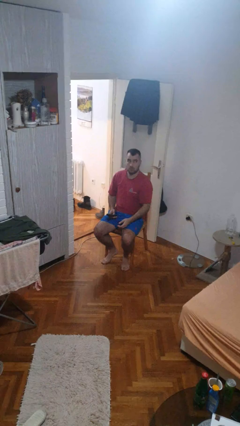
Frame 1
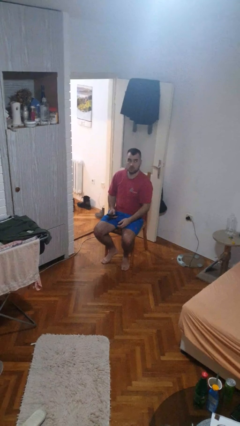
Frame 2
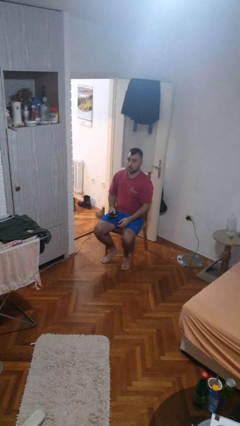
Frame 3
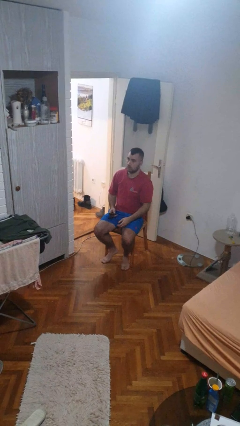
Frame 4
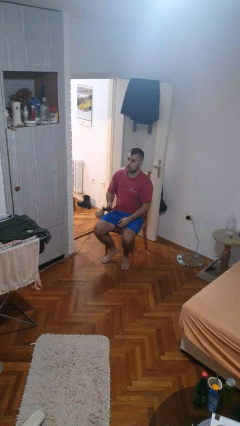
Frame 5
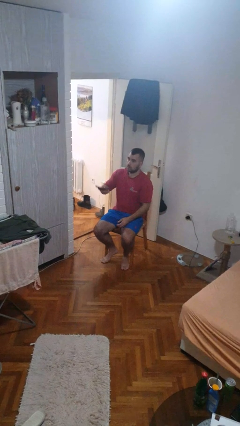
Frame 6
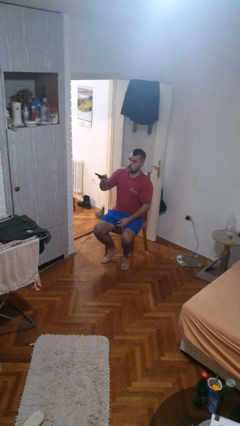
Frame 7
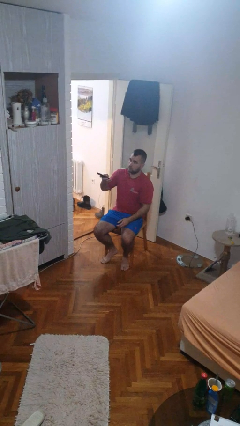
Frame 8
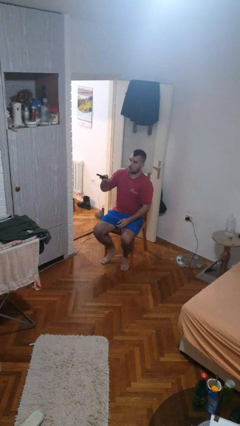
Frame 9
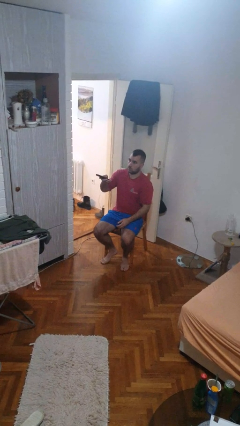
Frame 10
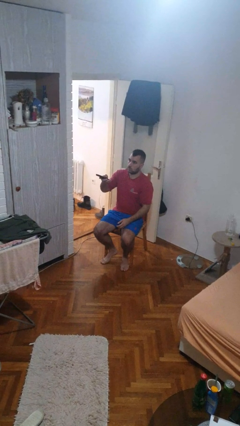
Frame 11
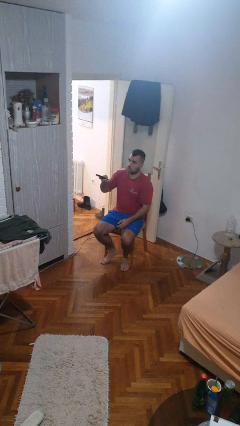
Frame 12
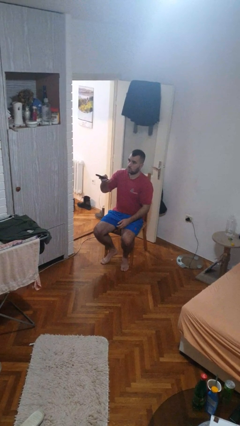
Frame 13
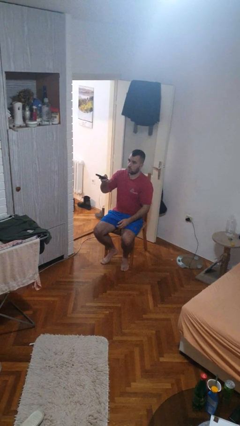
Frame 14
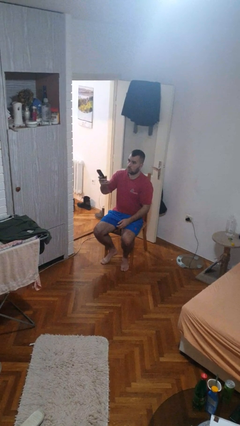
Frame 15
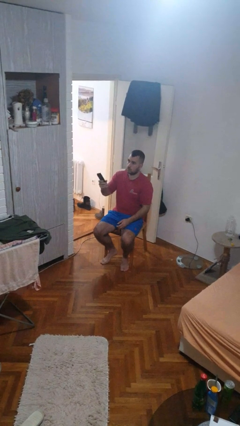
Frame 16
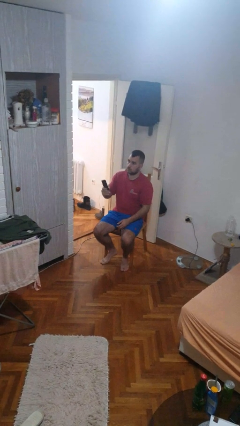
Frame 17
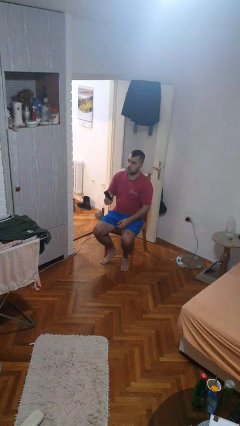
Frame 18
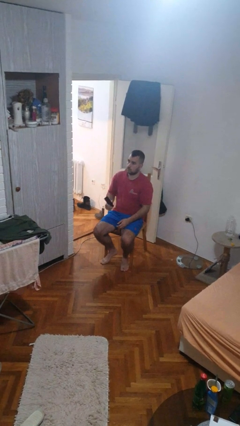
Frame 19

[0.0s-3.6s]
person uses television remote

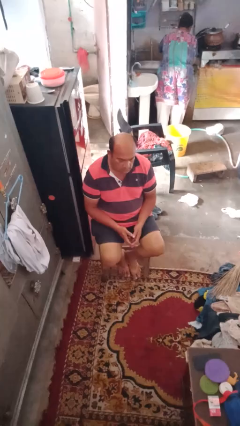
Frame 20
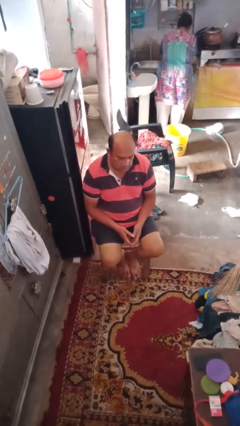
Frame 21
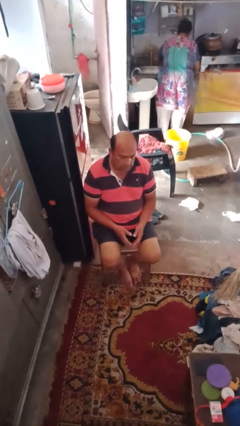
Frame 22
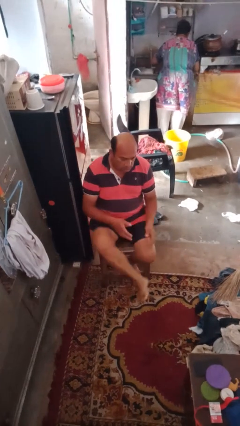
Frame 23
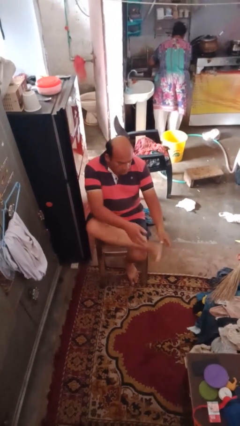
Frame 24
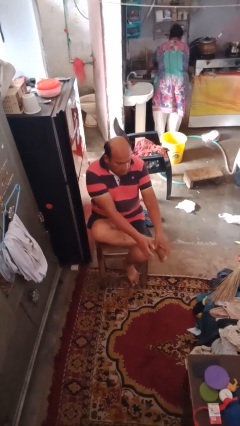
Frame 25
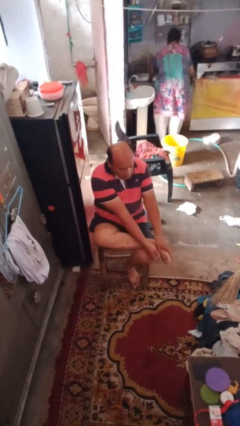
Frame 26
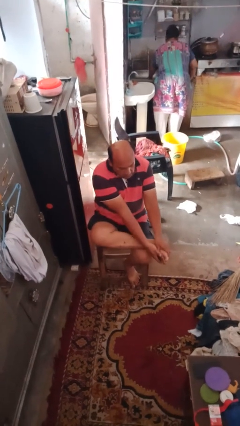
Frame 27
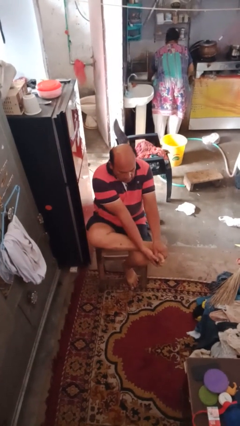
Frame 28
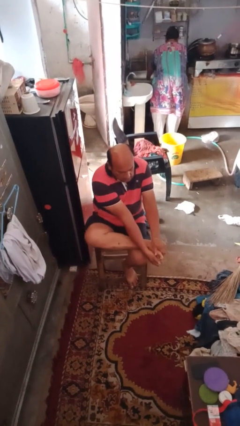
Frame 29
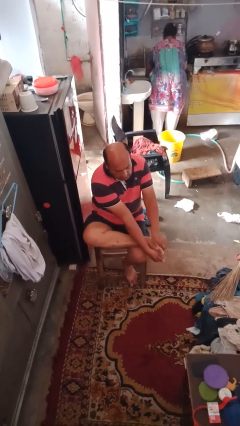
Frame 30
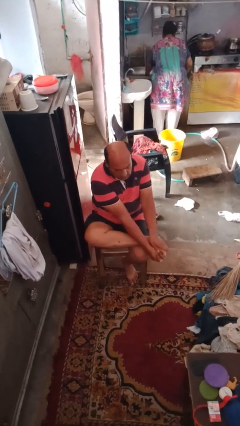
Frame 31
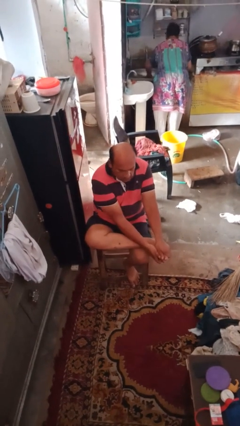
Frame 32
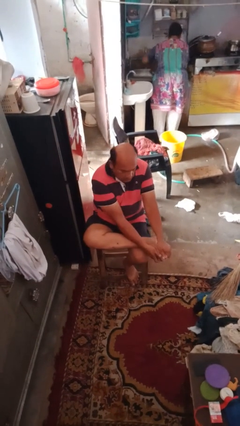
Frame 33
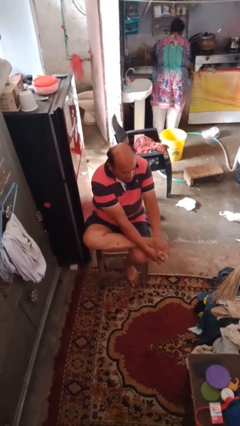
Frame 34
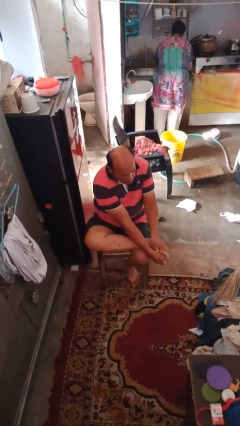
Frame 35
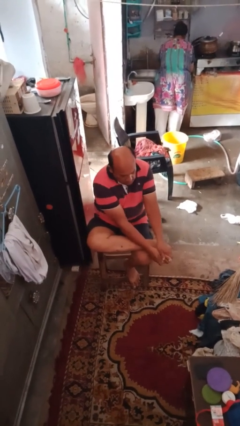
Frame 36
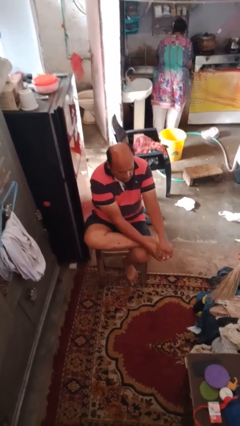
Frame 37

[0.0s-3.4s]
person rubs foot

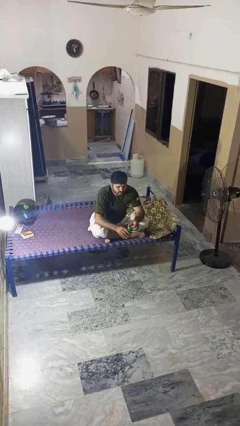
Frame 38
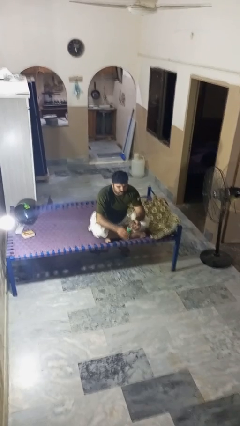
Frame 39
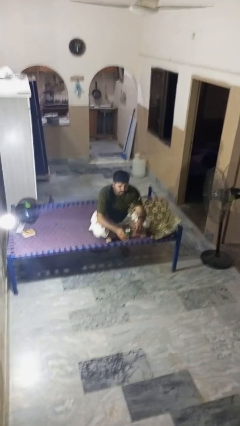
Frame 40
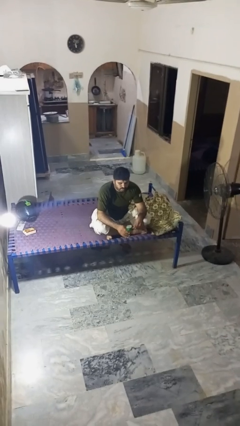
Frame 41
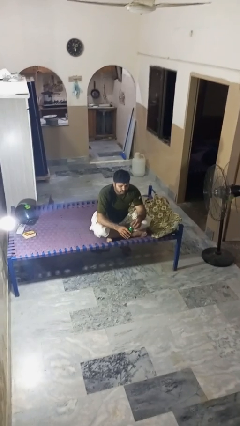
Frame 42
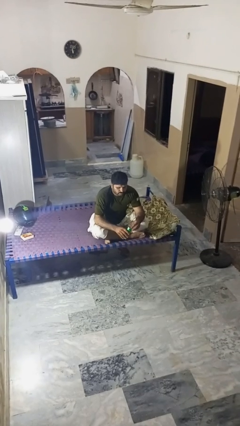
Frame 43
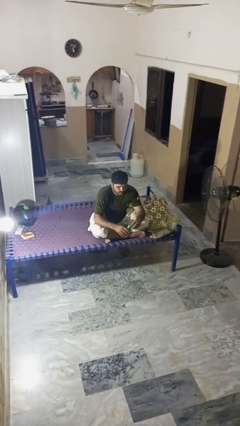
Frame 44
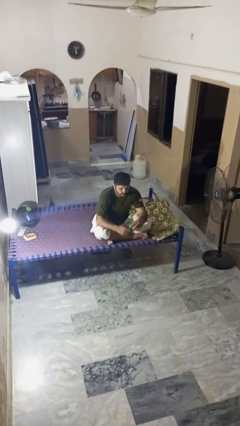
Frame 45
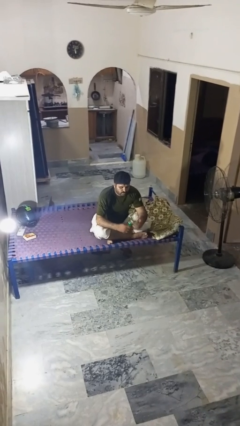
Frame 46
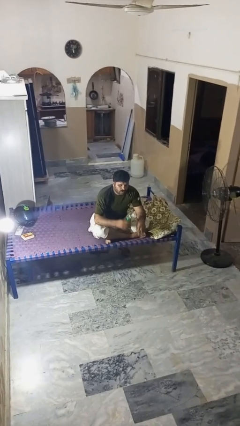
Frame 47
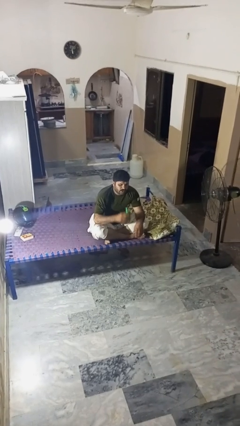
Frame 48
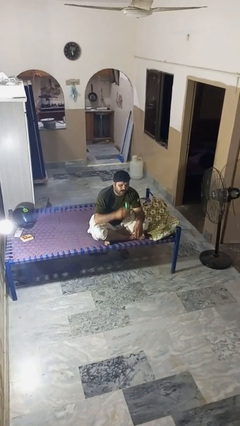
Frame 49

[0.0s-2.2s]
person opens beverage can

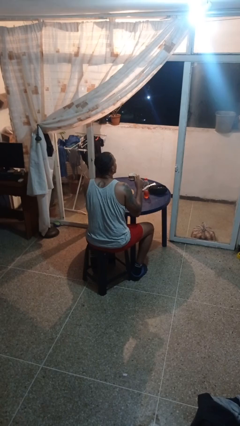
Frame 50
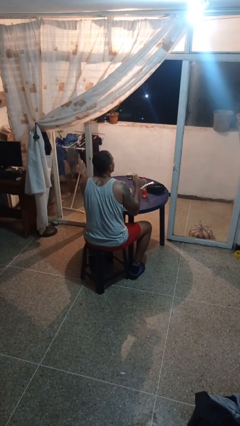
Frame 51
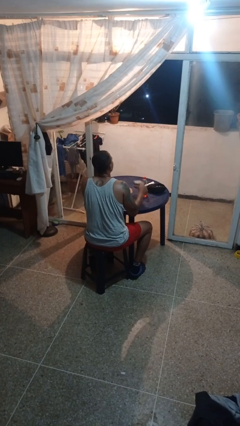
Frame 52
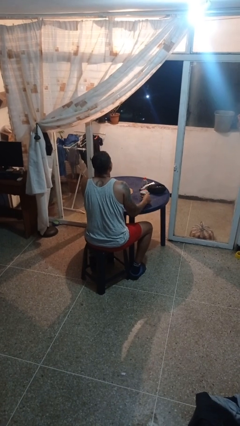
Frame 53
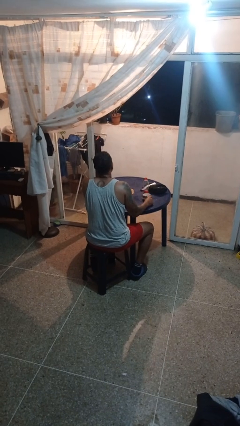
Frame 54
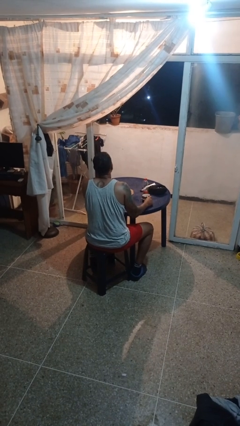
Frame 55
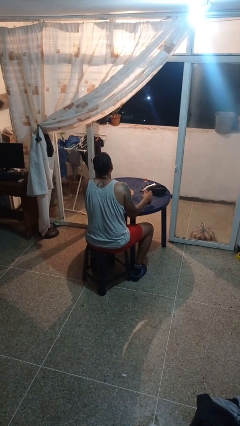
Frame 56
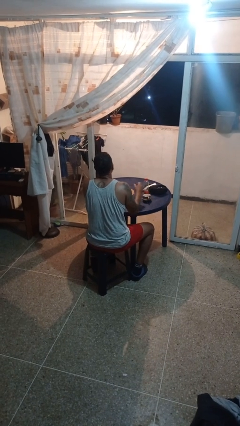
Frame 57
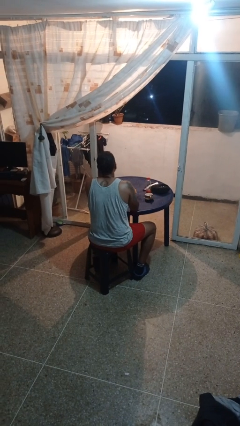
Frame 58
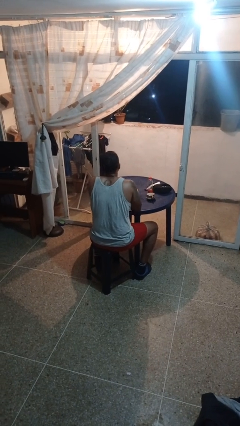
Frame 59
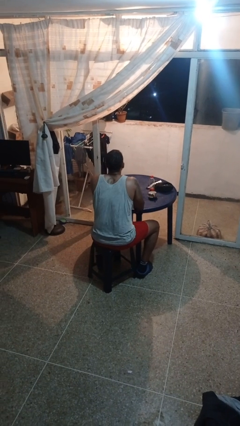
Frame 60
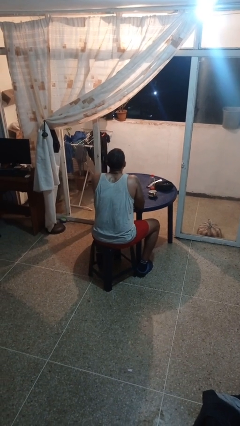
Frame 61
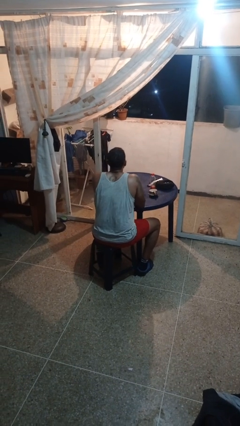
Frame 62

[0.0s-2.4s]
person puts down object on table

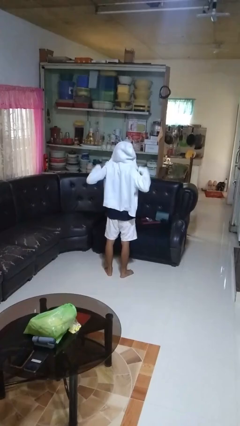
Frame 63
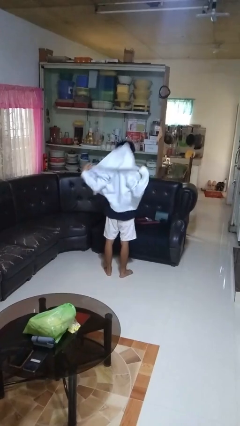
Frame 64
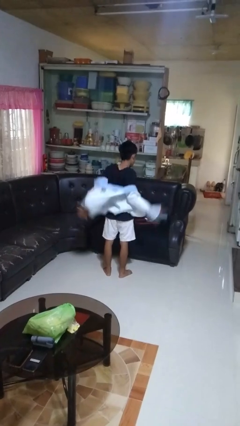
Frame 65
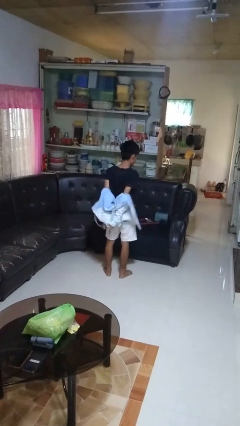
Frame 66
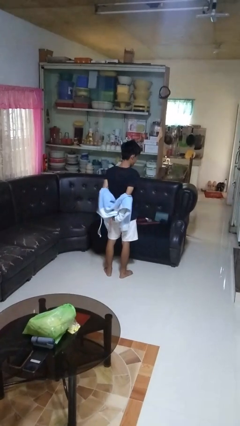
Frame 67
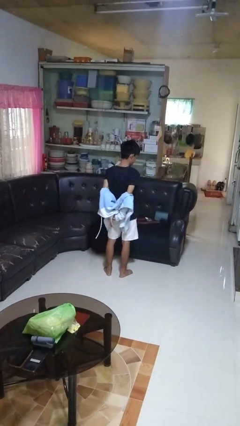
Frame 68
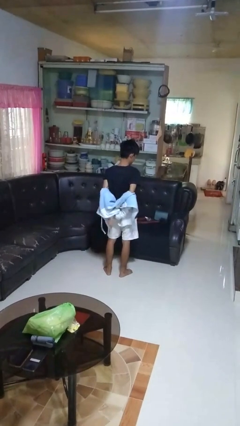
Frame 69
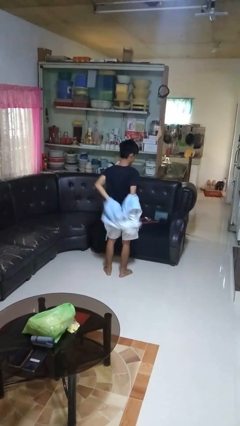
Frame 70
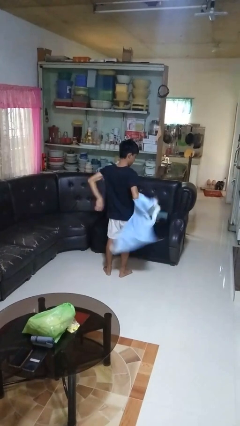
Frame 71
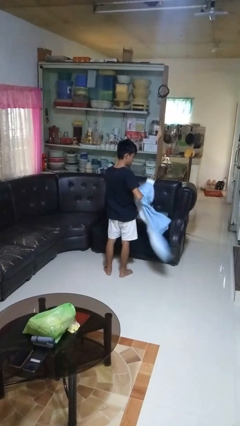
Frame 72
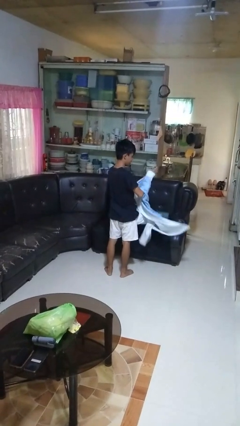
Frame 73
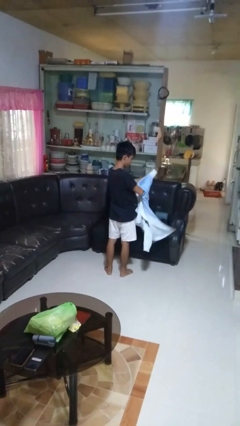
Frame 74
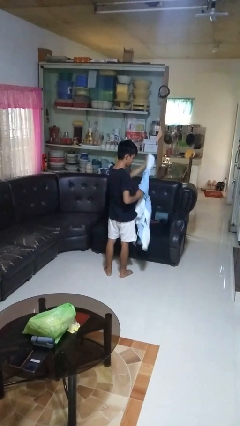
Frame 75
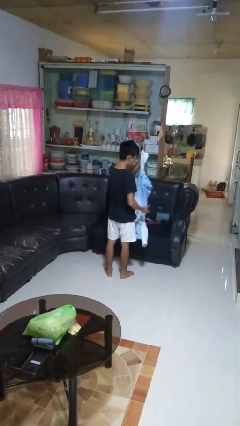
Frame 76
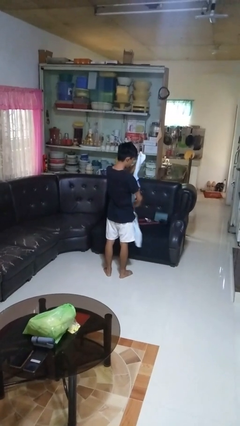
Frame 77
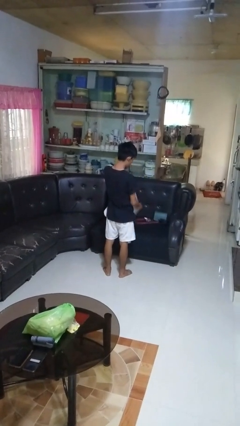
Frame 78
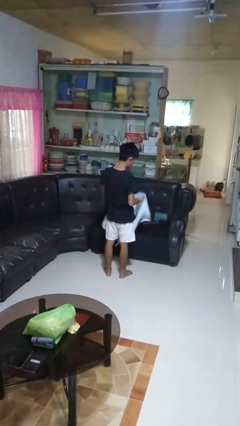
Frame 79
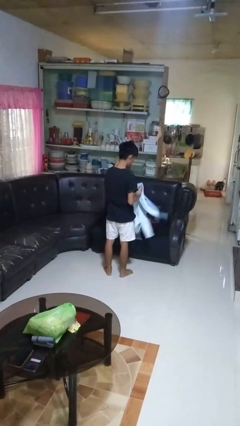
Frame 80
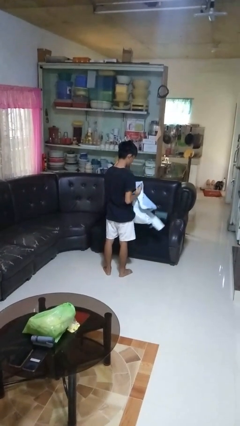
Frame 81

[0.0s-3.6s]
person takes off hoodie

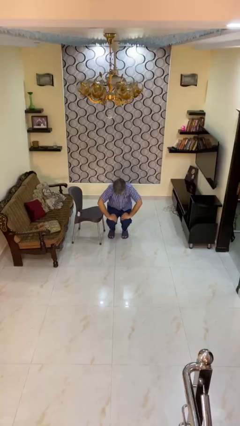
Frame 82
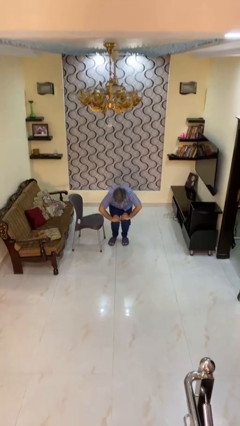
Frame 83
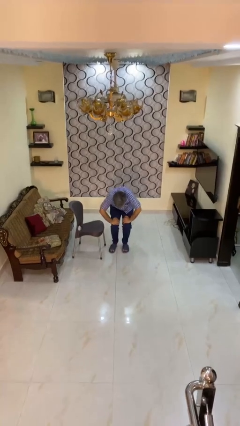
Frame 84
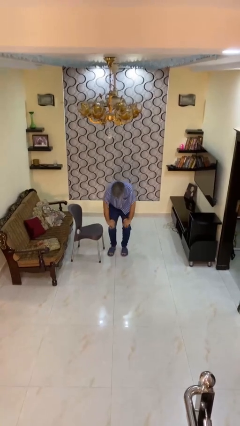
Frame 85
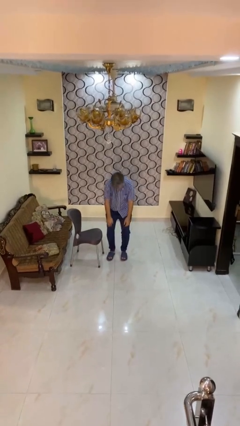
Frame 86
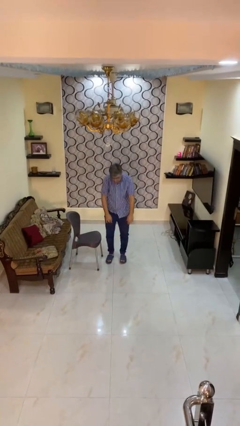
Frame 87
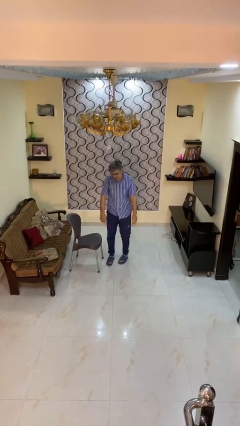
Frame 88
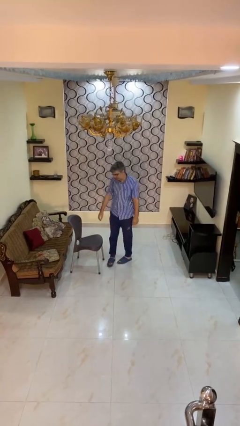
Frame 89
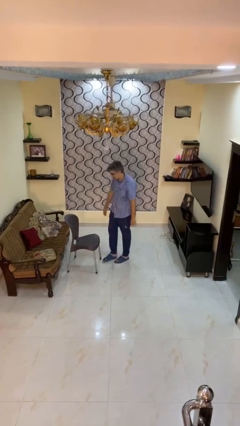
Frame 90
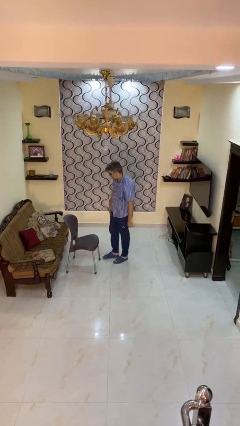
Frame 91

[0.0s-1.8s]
person stands up from floor

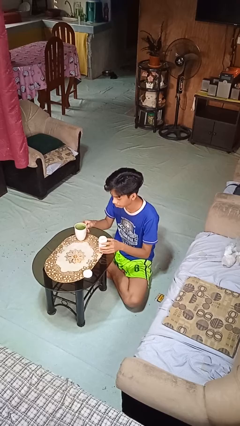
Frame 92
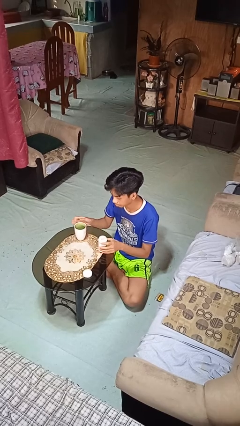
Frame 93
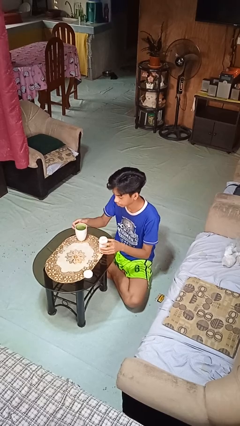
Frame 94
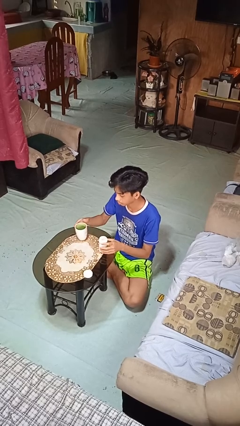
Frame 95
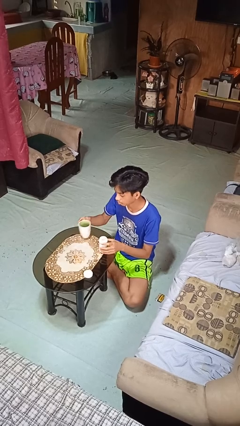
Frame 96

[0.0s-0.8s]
person drinks from cup
